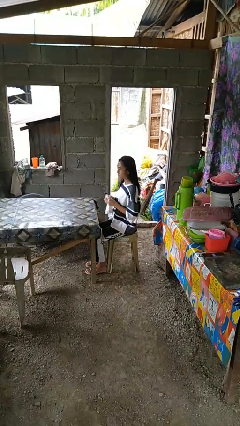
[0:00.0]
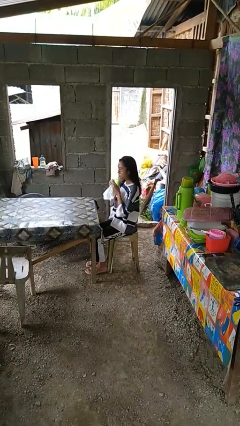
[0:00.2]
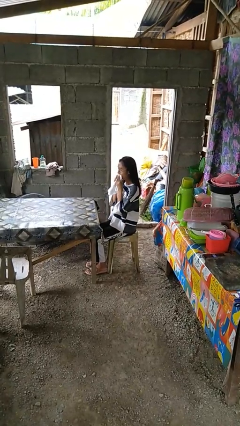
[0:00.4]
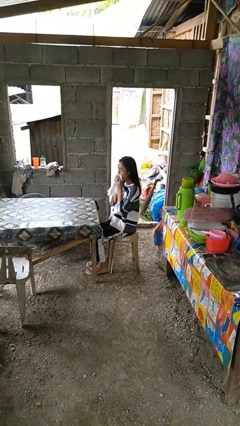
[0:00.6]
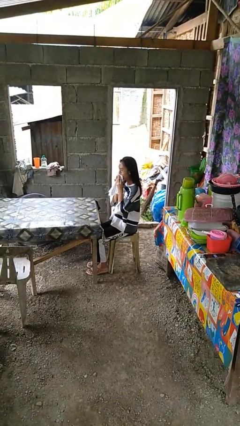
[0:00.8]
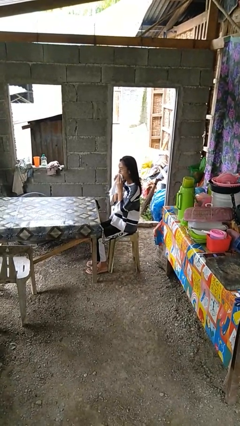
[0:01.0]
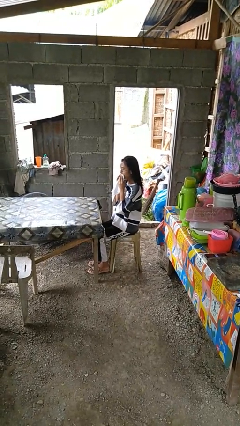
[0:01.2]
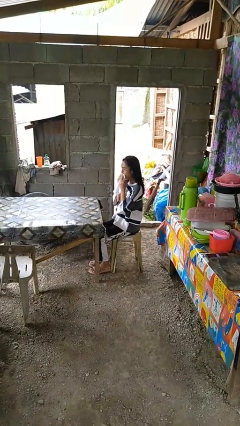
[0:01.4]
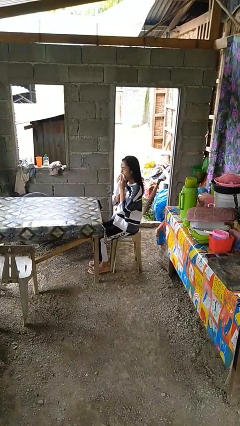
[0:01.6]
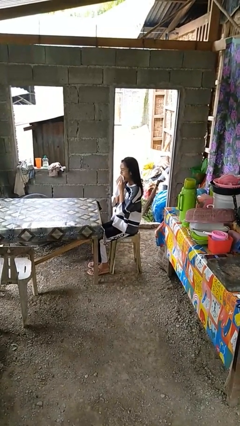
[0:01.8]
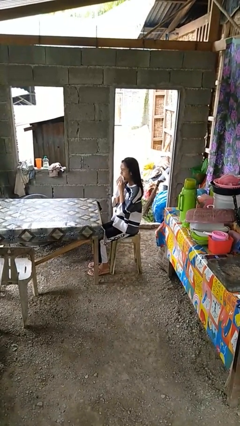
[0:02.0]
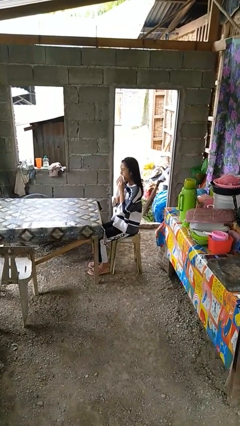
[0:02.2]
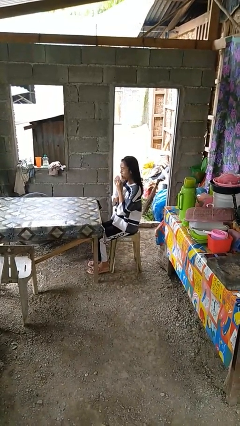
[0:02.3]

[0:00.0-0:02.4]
person wipes mouth with napkin

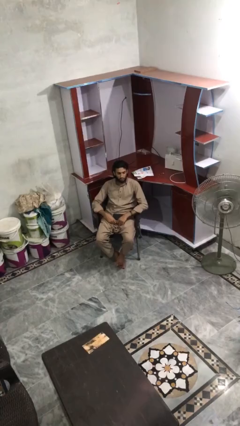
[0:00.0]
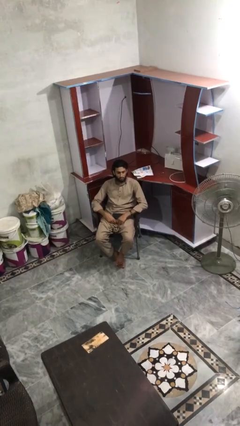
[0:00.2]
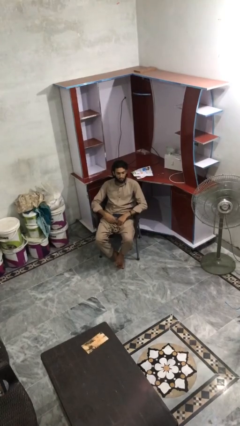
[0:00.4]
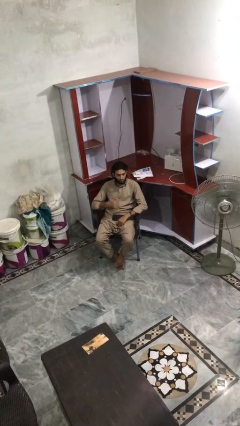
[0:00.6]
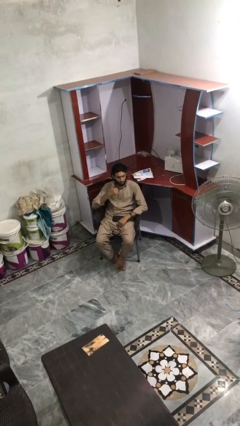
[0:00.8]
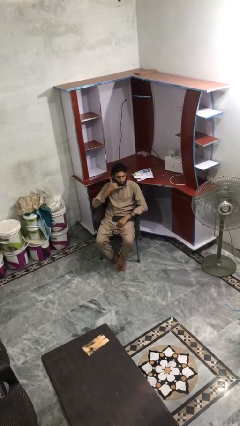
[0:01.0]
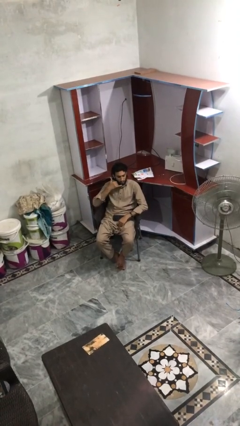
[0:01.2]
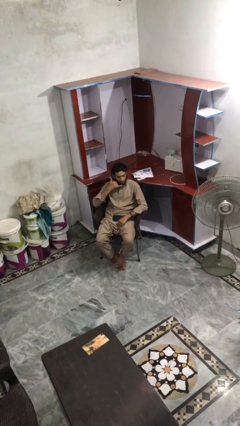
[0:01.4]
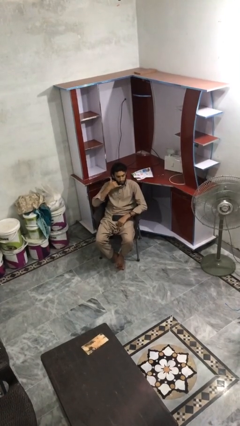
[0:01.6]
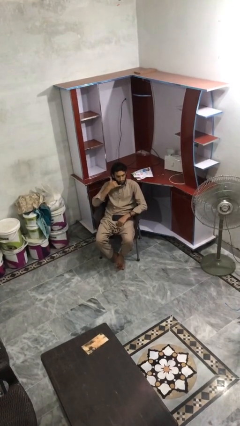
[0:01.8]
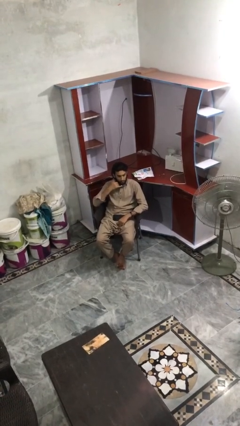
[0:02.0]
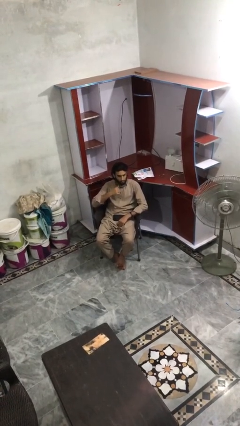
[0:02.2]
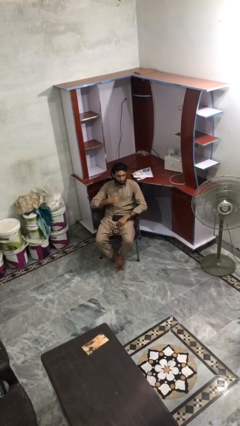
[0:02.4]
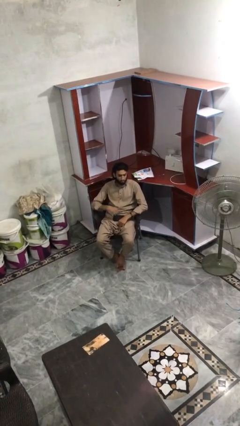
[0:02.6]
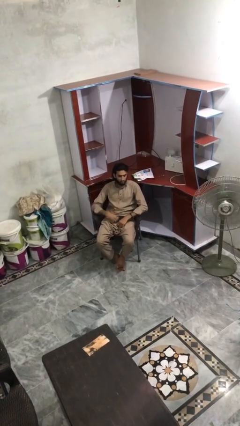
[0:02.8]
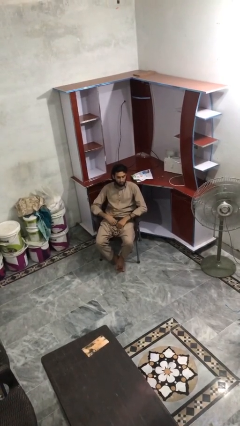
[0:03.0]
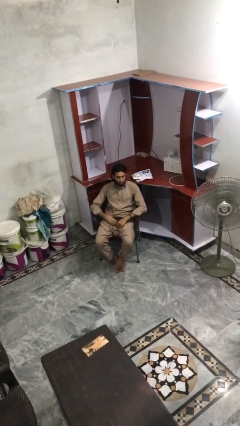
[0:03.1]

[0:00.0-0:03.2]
person gestures call me

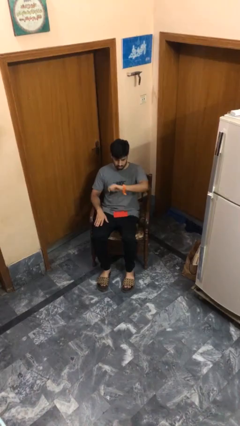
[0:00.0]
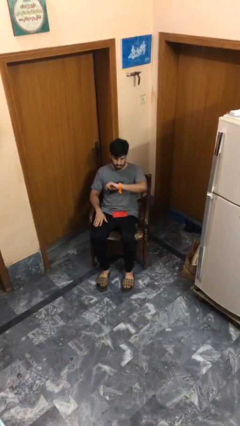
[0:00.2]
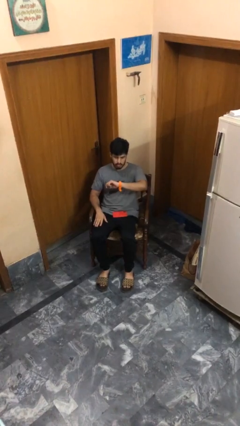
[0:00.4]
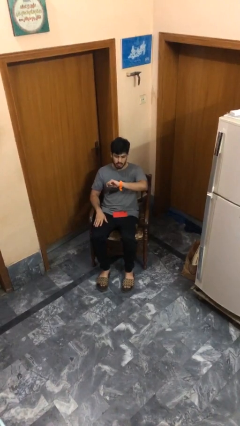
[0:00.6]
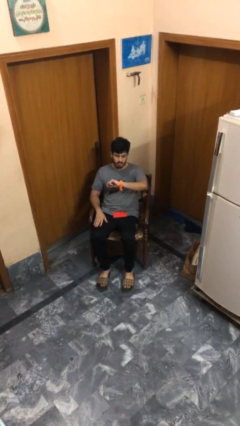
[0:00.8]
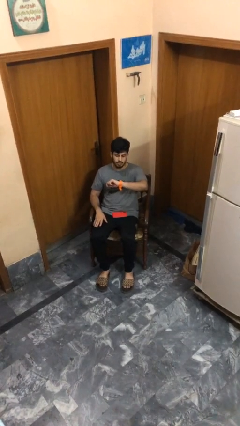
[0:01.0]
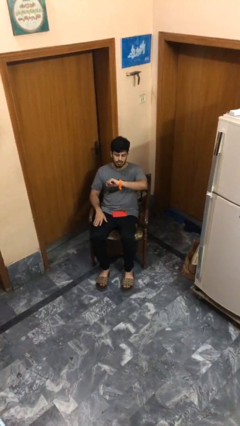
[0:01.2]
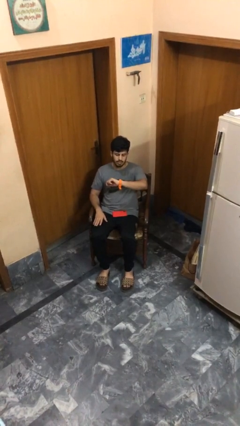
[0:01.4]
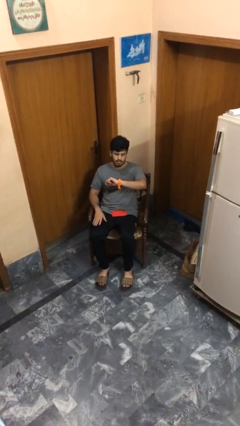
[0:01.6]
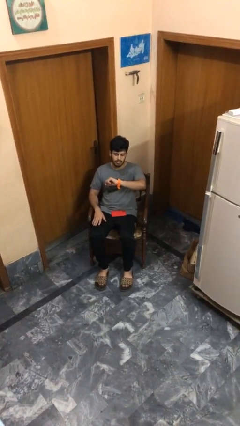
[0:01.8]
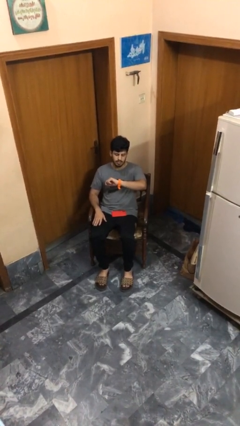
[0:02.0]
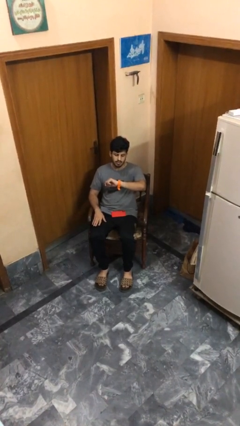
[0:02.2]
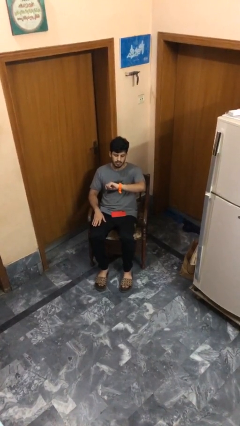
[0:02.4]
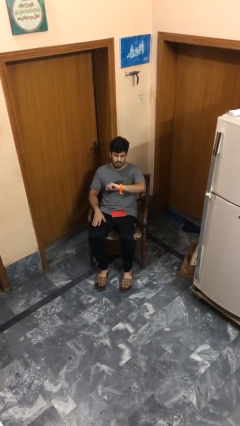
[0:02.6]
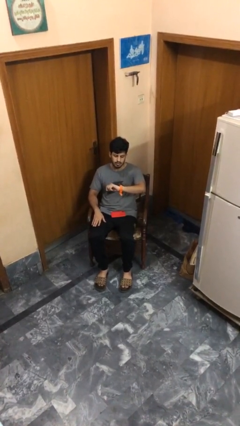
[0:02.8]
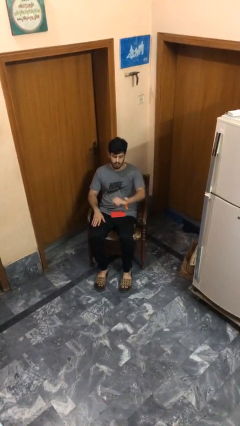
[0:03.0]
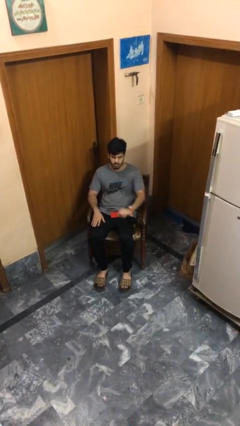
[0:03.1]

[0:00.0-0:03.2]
person looks at wristwatch

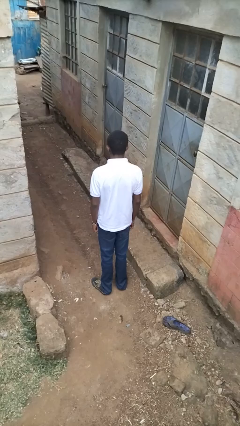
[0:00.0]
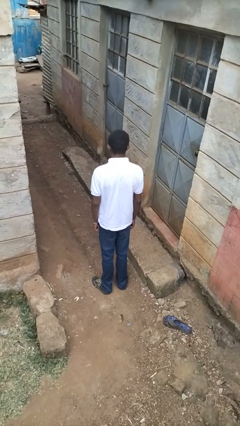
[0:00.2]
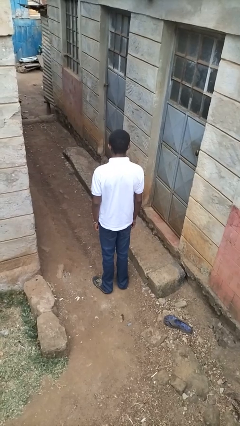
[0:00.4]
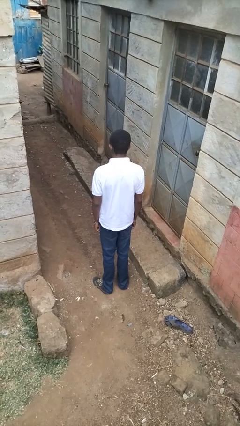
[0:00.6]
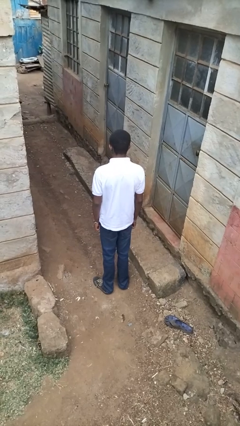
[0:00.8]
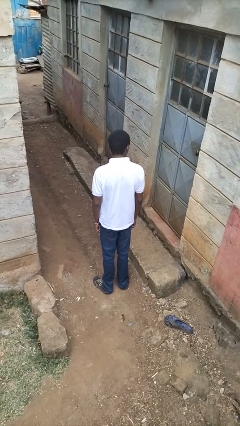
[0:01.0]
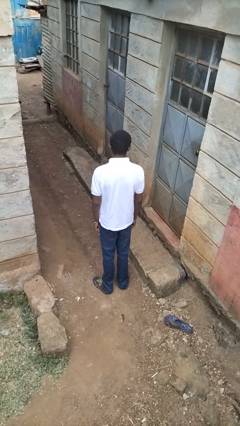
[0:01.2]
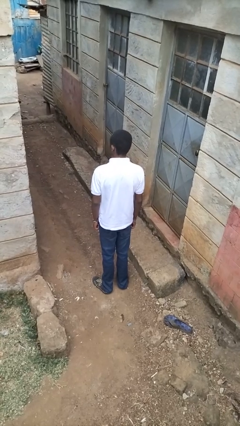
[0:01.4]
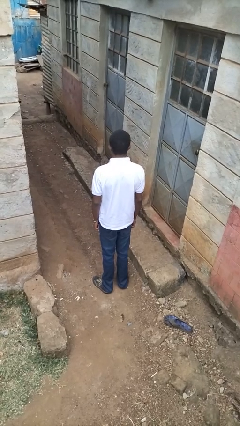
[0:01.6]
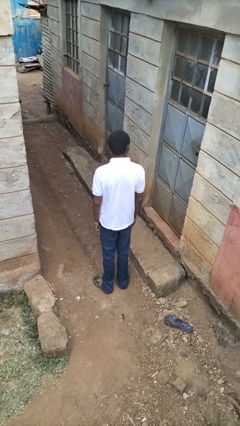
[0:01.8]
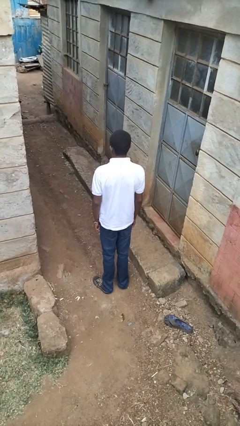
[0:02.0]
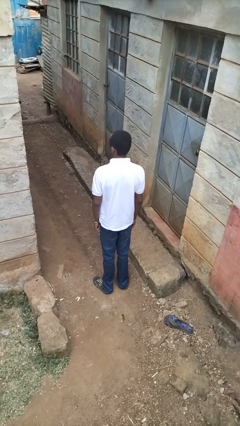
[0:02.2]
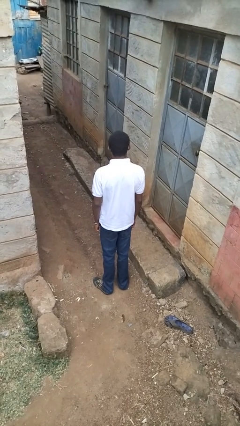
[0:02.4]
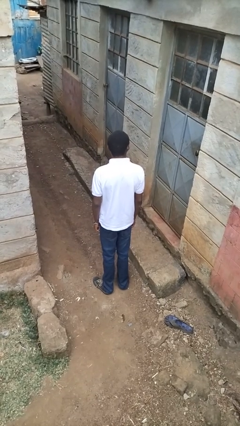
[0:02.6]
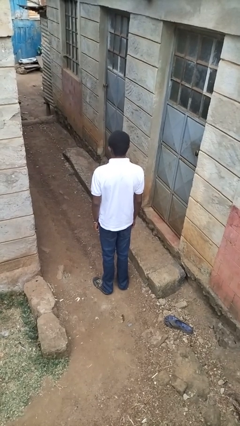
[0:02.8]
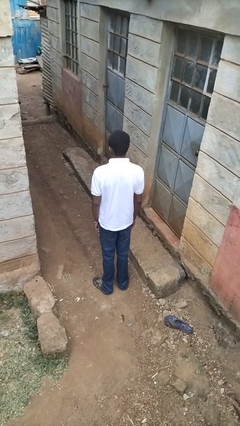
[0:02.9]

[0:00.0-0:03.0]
person shakes head

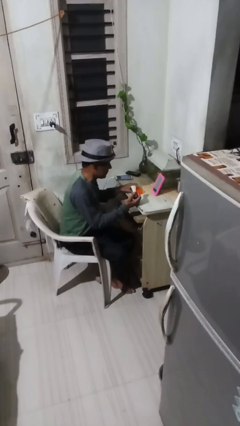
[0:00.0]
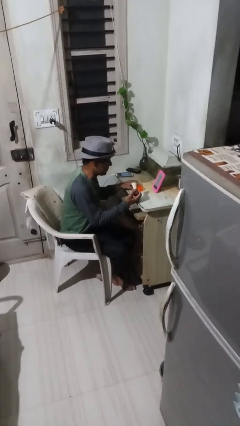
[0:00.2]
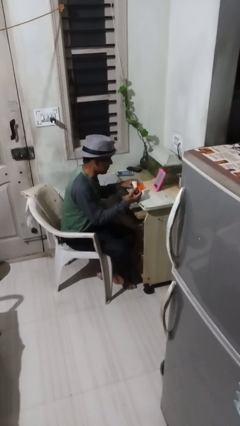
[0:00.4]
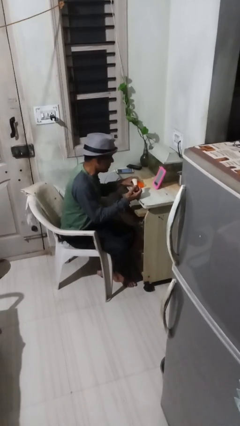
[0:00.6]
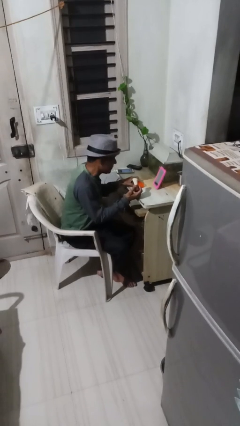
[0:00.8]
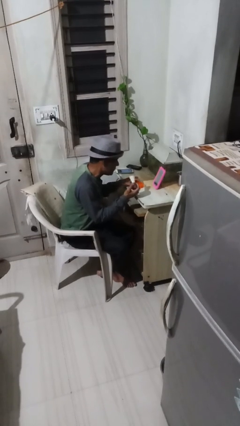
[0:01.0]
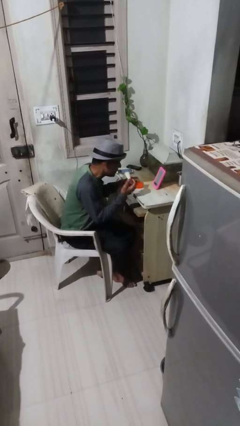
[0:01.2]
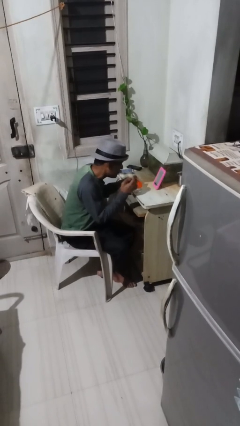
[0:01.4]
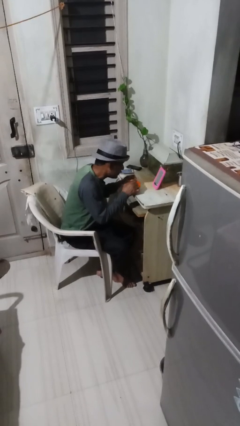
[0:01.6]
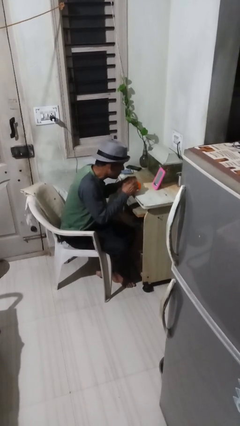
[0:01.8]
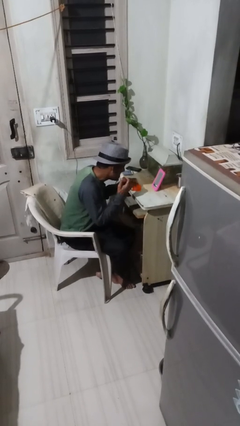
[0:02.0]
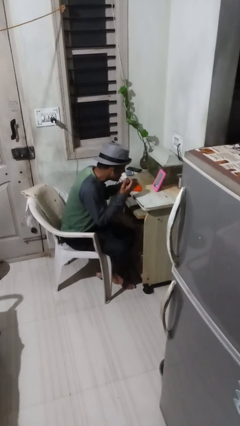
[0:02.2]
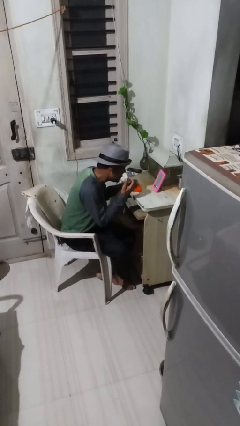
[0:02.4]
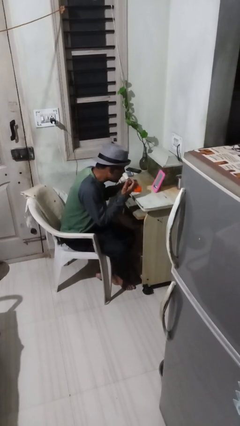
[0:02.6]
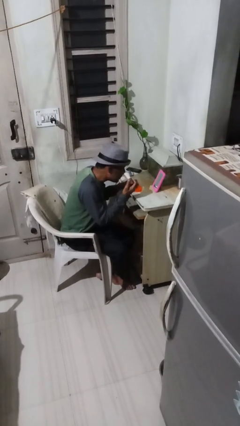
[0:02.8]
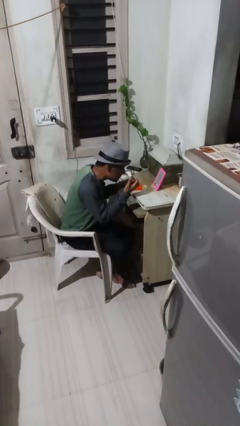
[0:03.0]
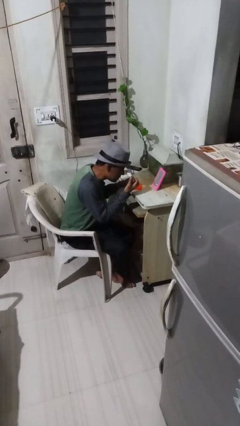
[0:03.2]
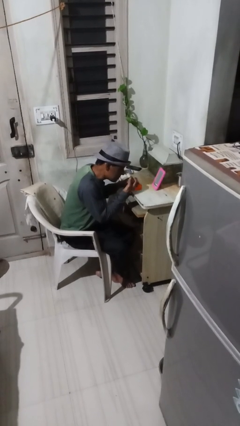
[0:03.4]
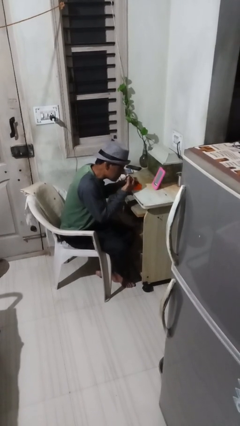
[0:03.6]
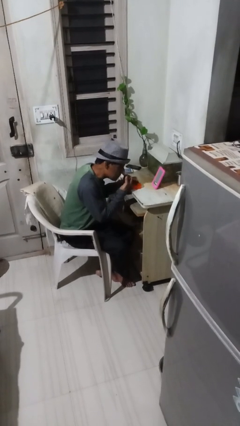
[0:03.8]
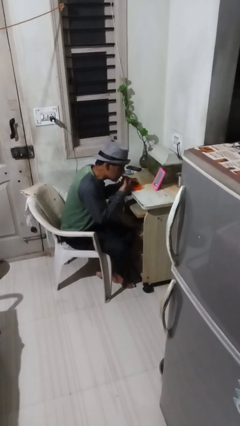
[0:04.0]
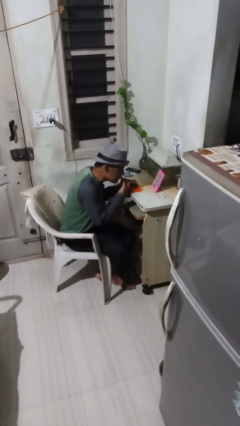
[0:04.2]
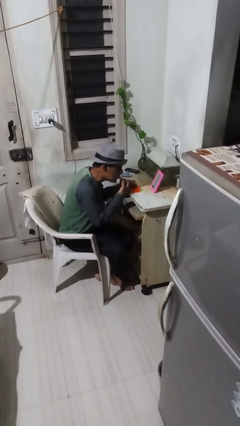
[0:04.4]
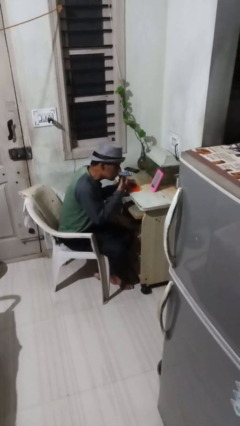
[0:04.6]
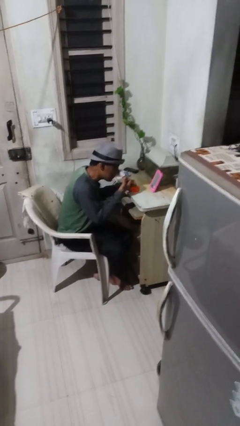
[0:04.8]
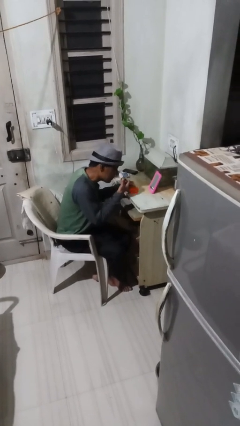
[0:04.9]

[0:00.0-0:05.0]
person applies foundation makeup

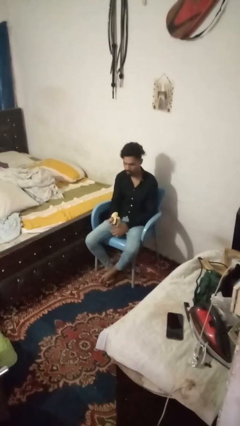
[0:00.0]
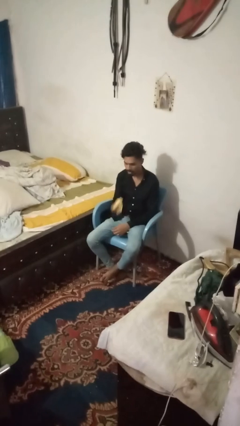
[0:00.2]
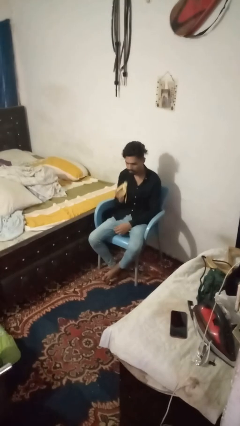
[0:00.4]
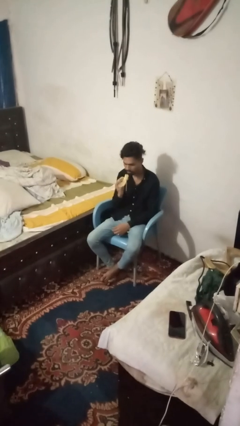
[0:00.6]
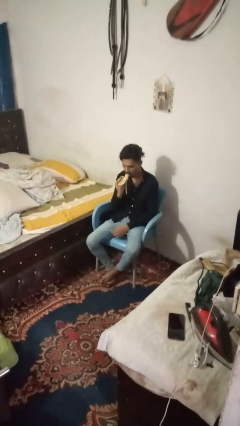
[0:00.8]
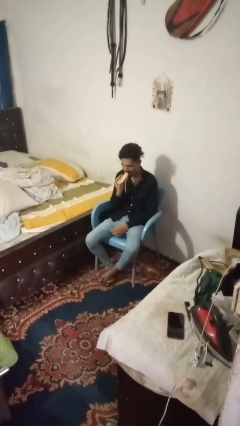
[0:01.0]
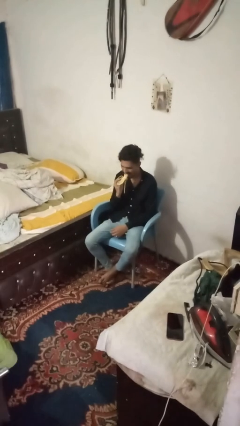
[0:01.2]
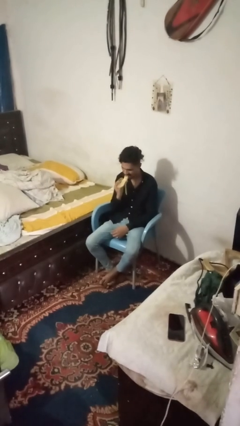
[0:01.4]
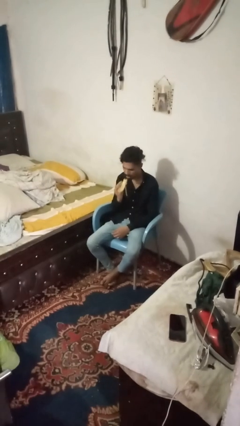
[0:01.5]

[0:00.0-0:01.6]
person eats banana
